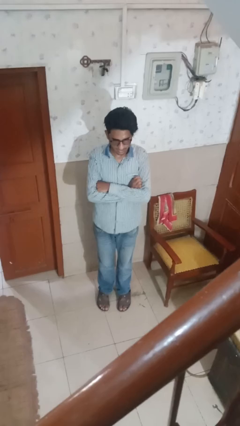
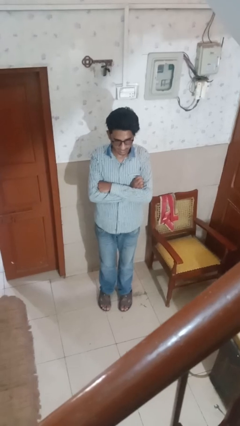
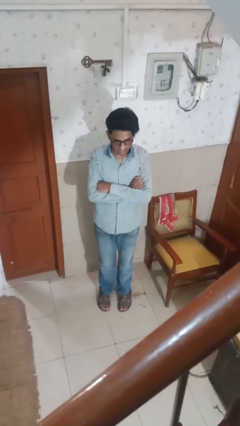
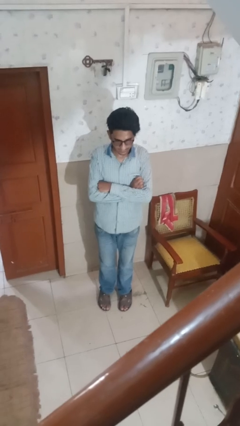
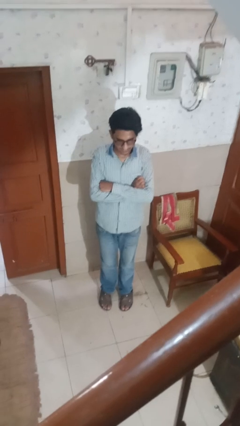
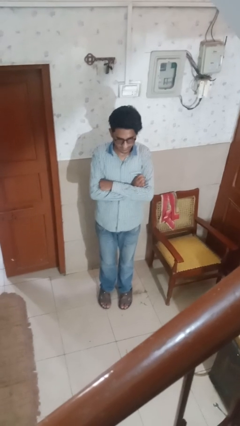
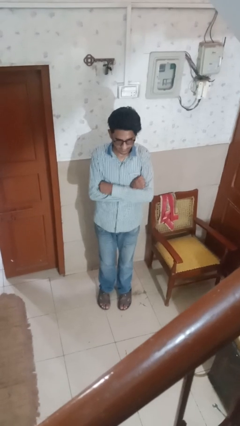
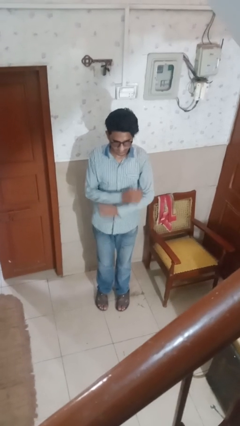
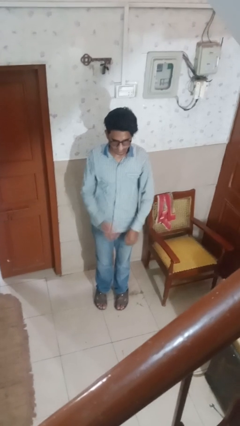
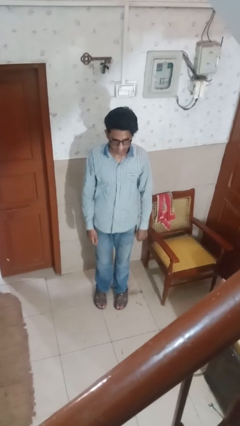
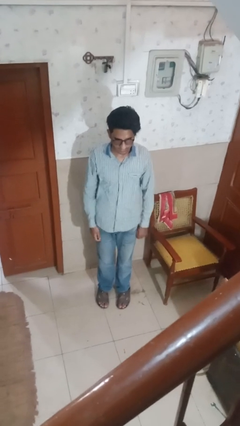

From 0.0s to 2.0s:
person crosses arms

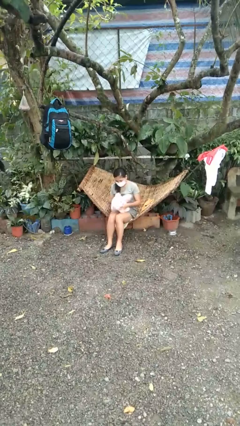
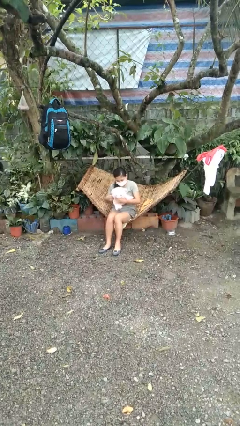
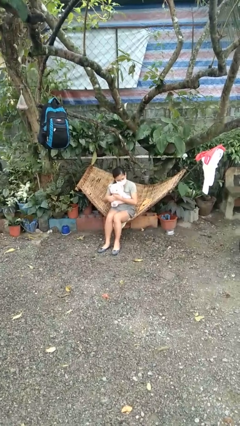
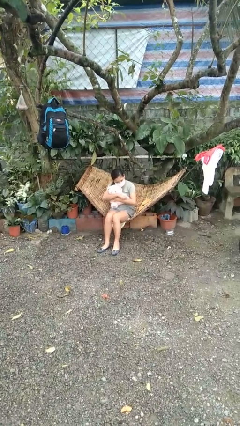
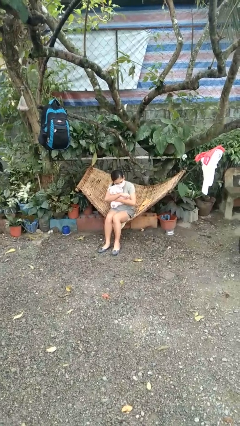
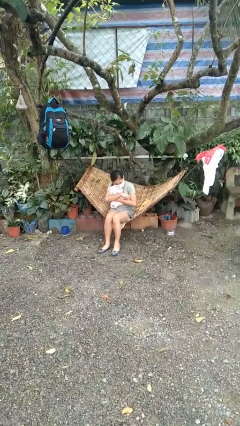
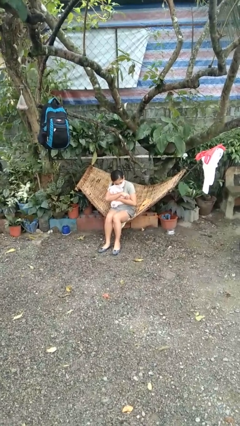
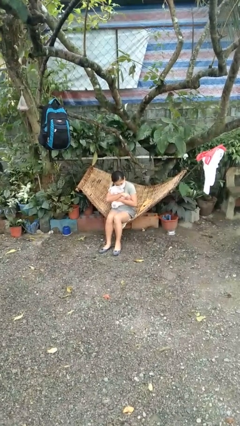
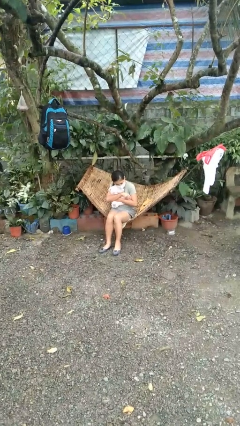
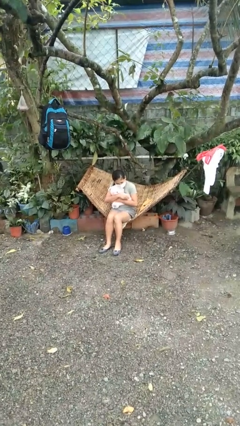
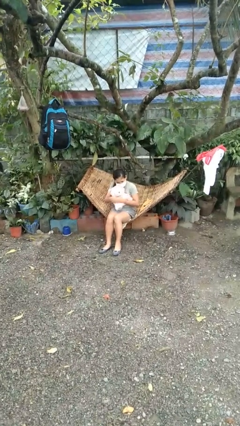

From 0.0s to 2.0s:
person hugs stuffed animal

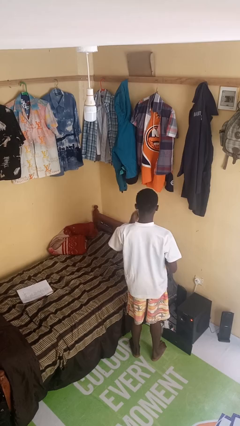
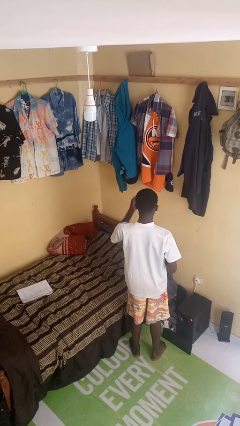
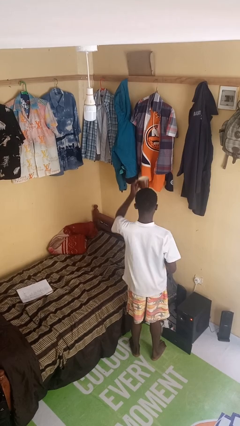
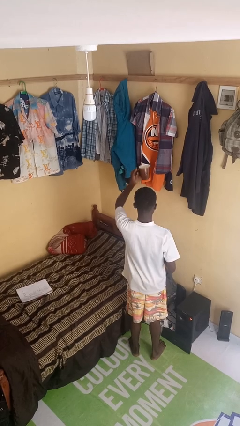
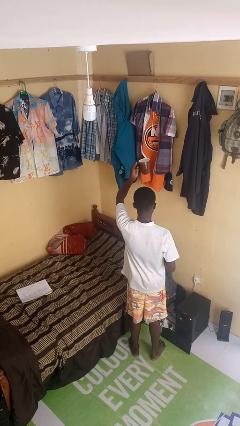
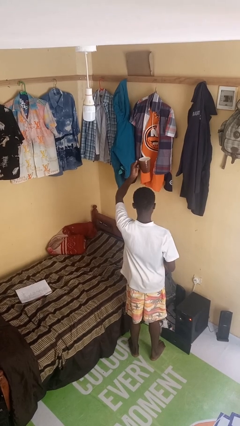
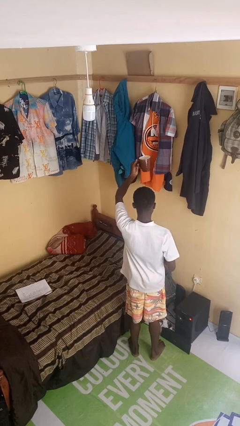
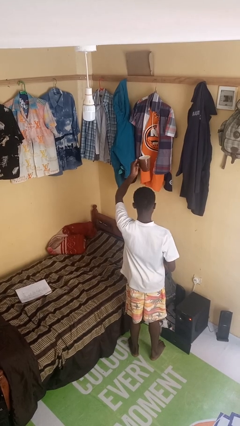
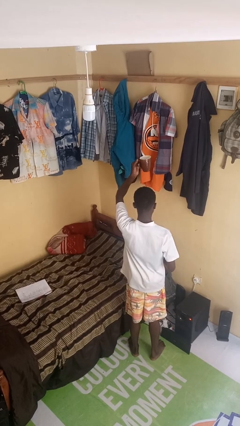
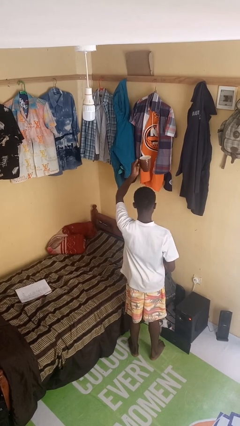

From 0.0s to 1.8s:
person holds object above head

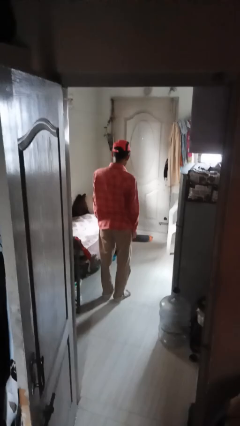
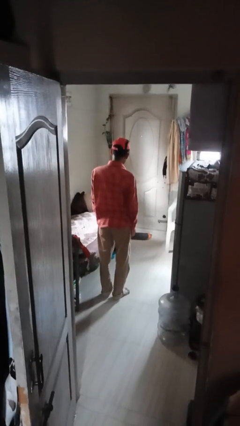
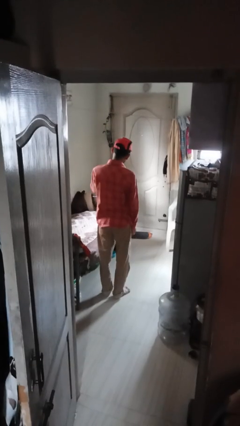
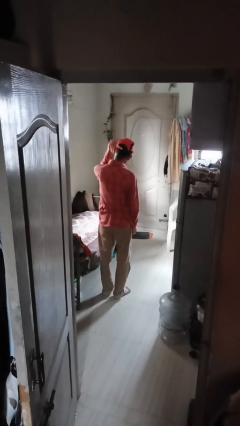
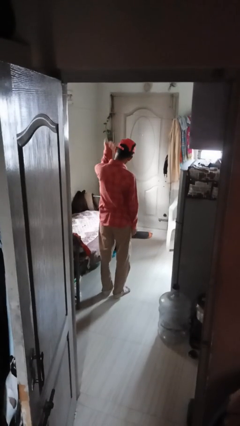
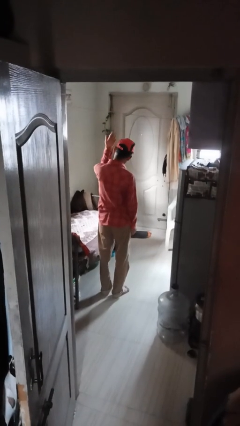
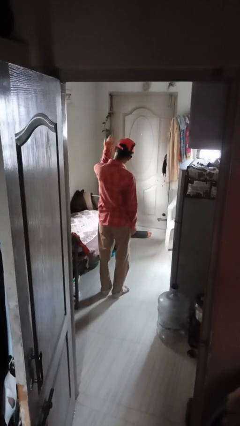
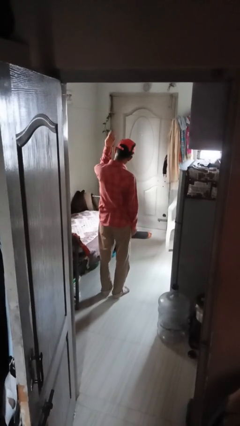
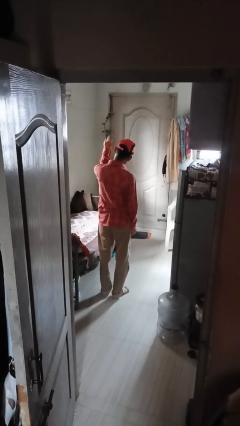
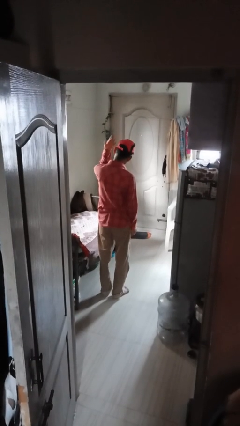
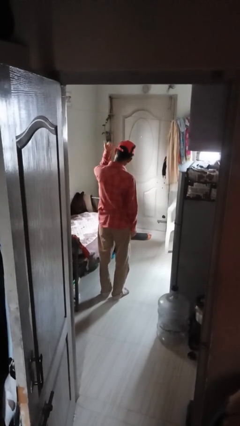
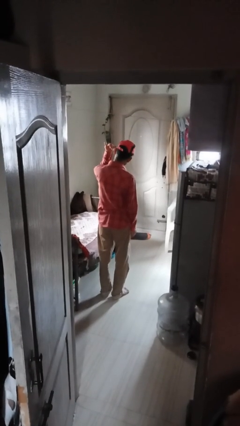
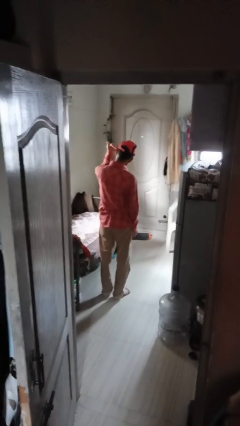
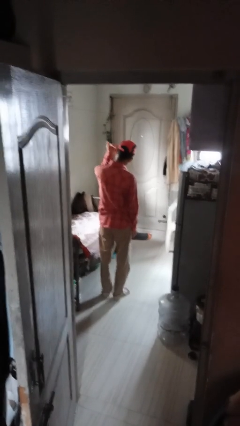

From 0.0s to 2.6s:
person gestures come here

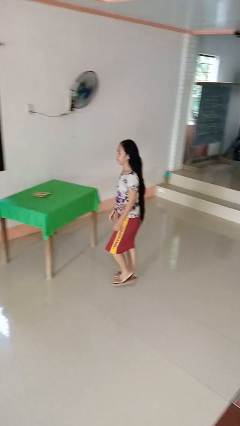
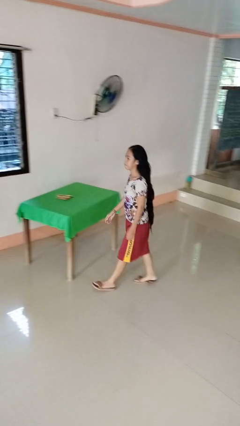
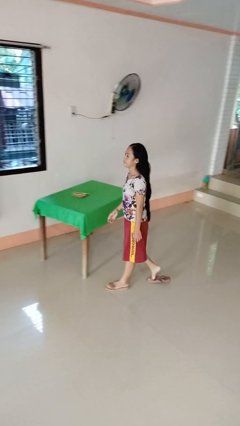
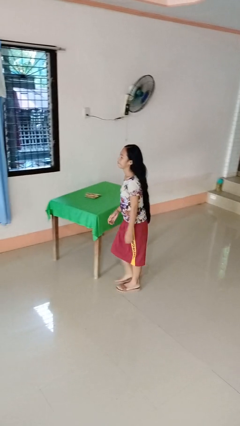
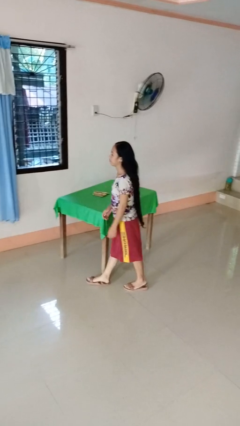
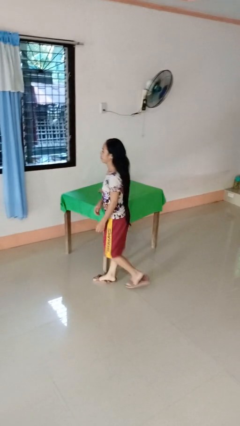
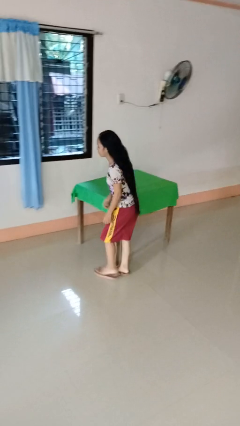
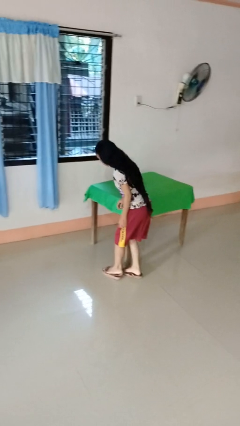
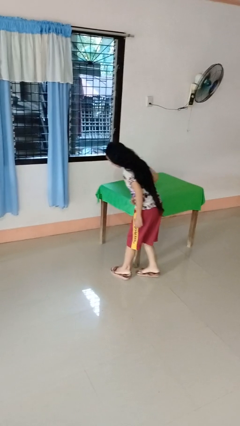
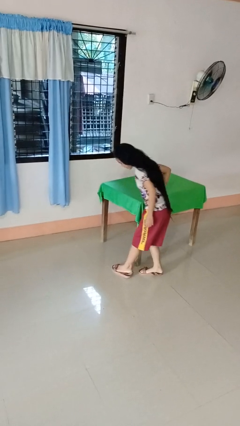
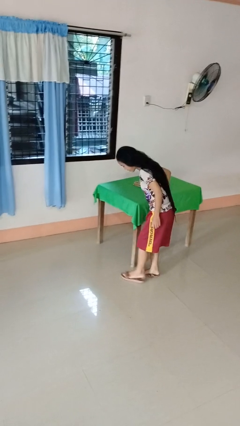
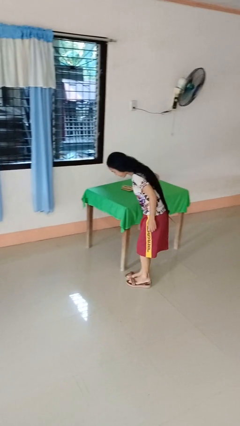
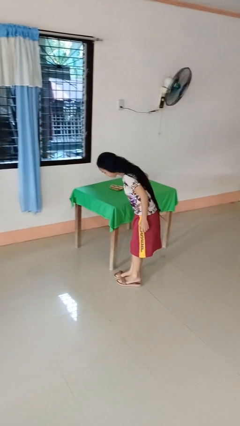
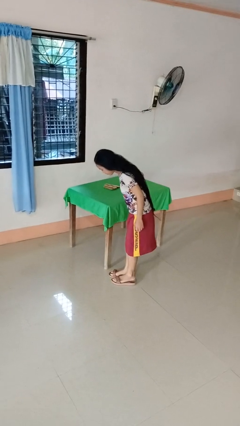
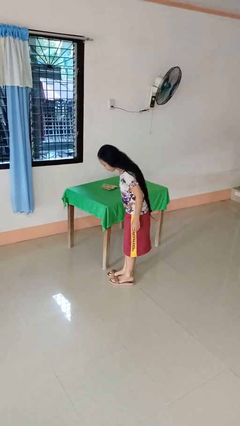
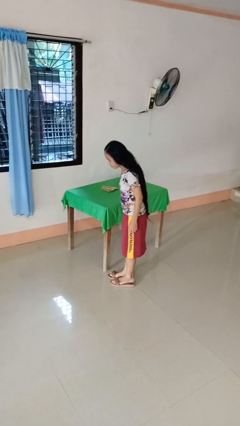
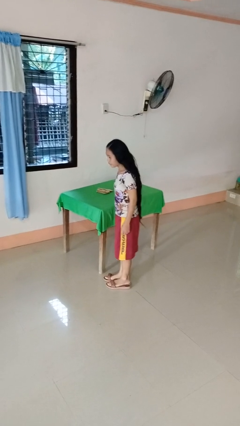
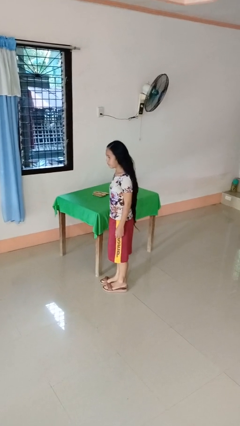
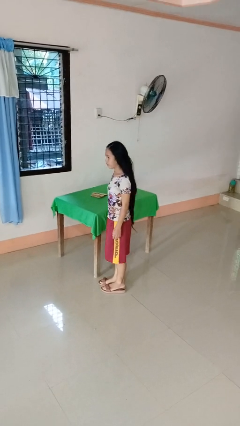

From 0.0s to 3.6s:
person bumps into table

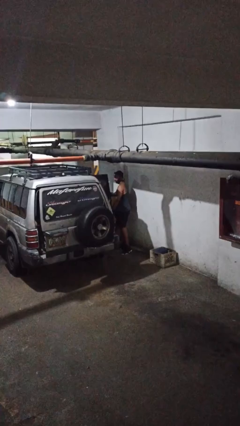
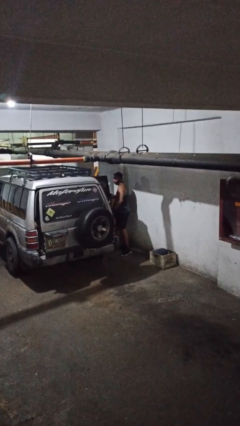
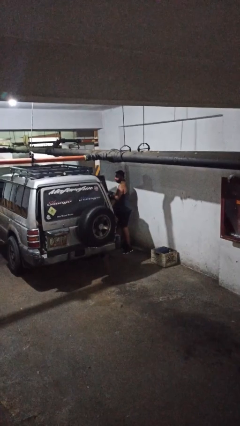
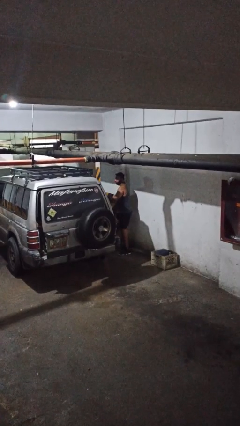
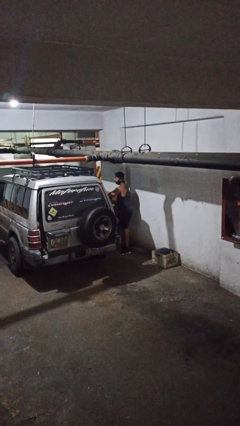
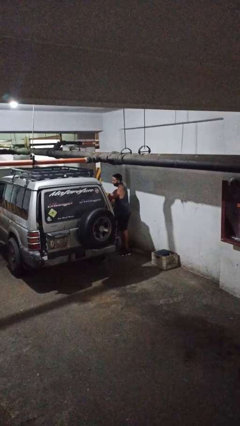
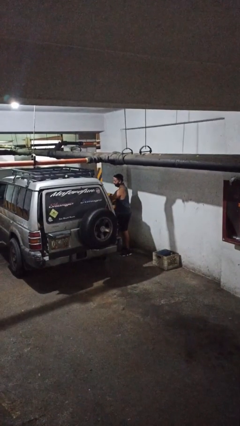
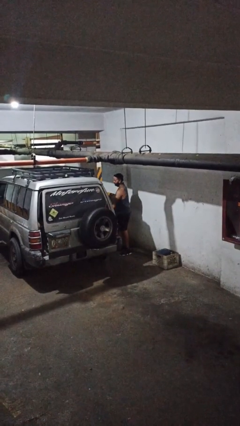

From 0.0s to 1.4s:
person closes car door

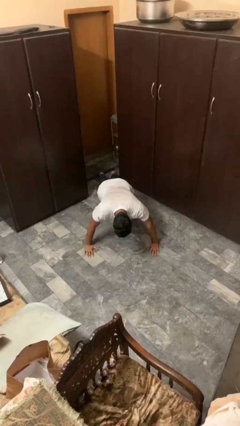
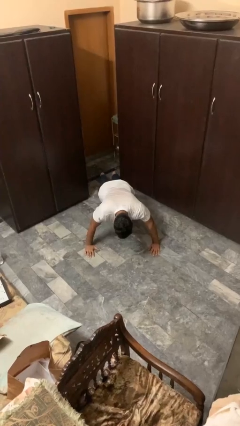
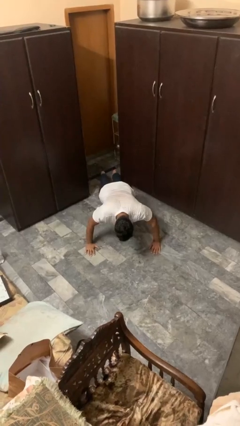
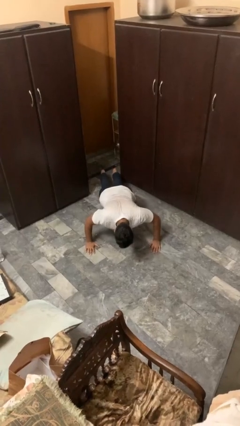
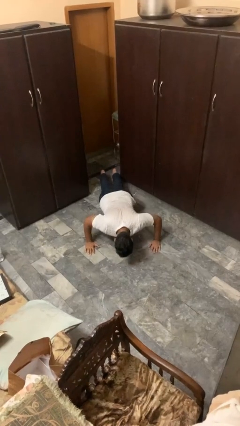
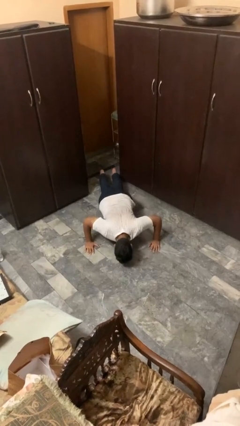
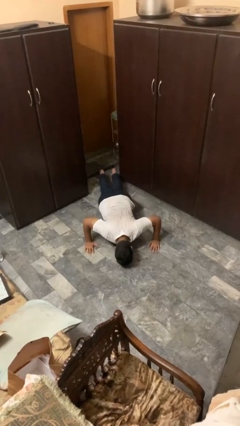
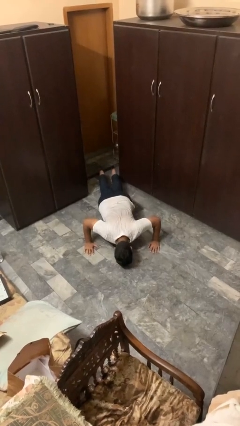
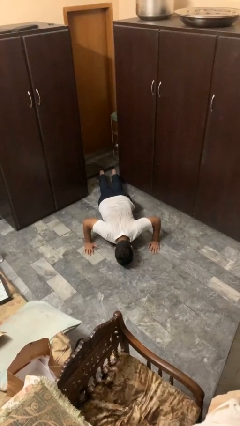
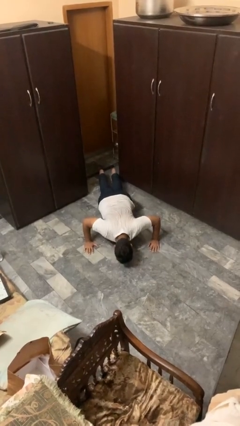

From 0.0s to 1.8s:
person exercises with pushup

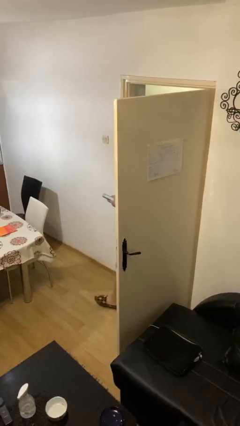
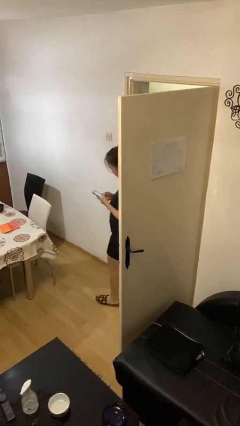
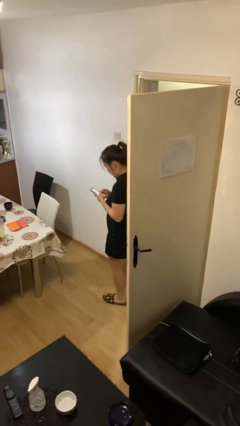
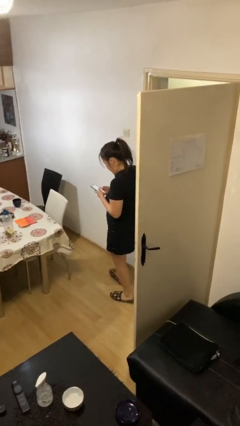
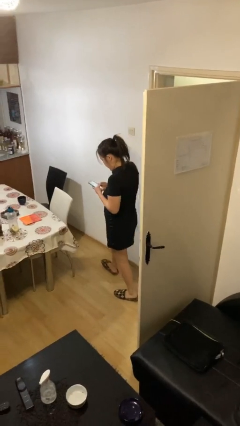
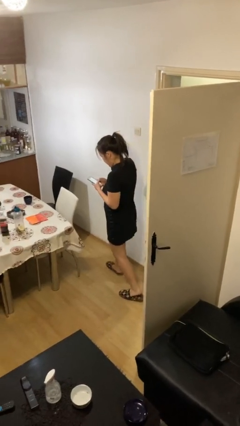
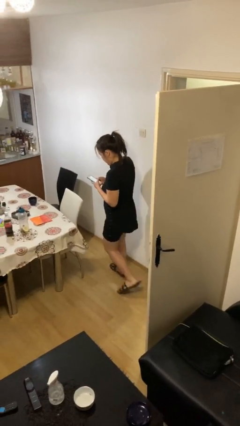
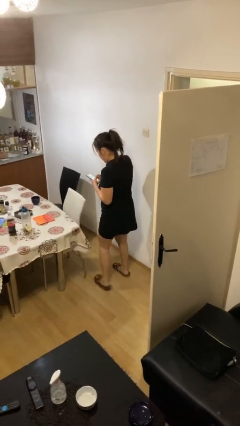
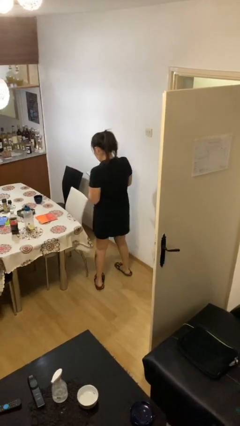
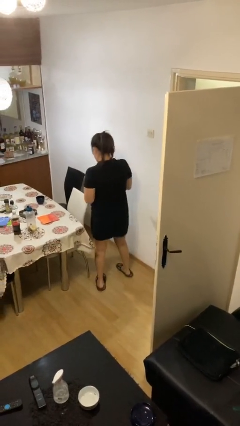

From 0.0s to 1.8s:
person enters scene through structure
